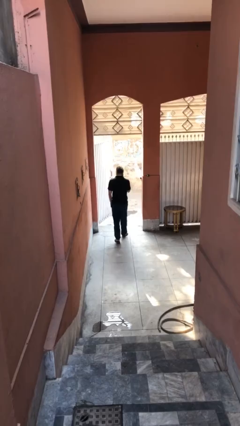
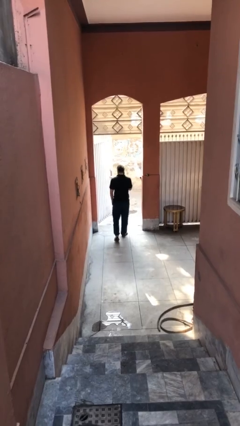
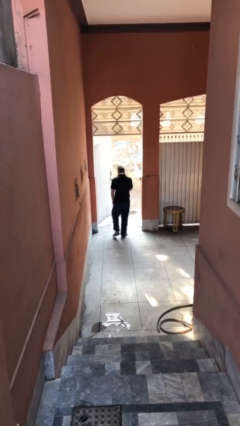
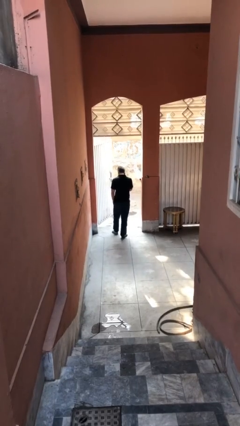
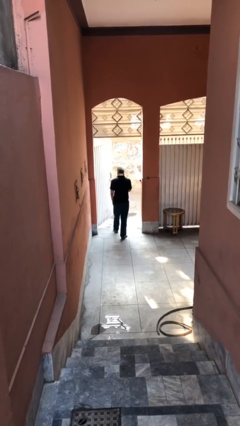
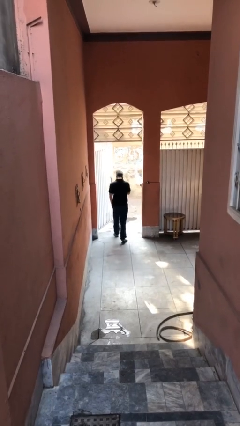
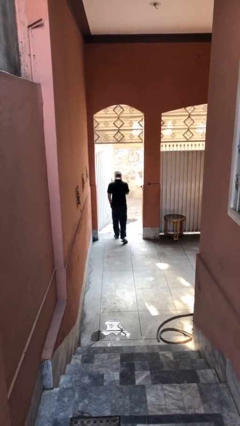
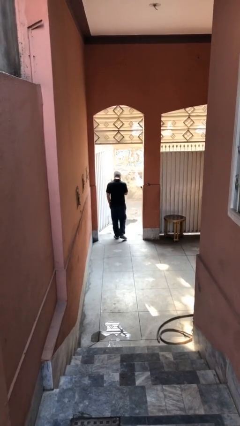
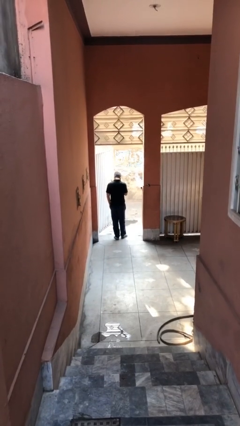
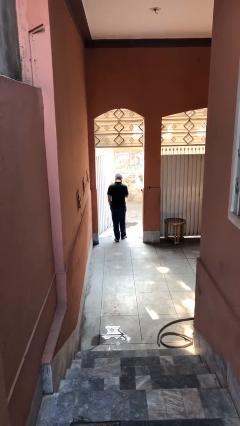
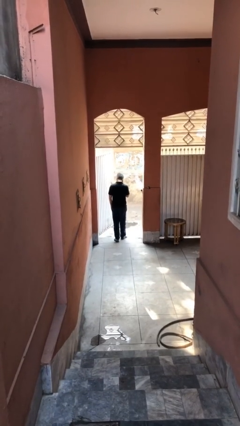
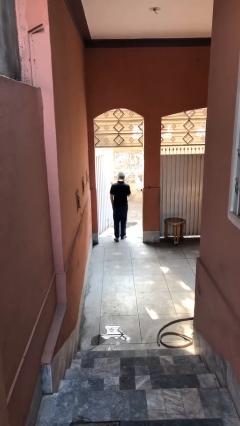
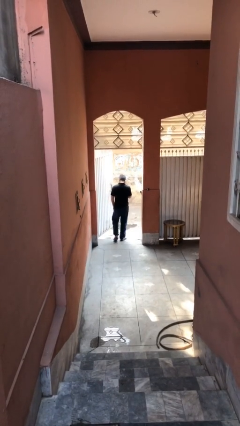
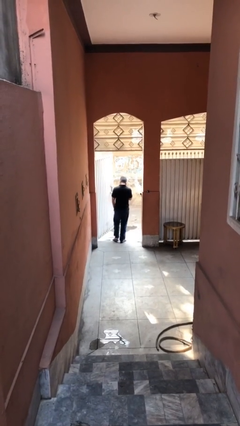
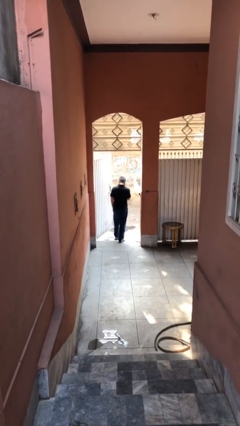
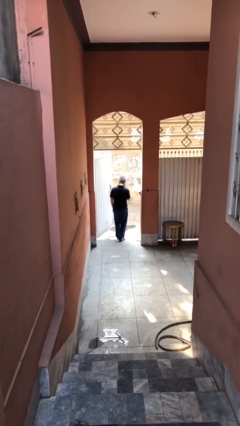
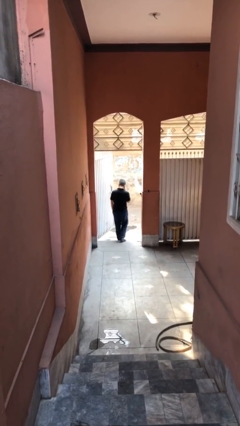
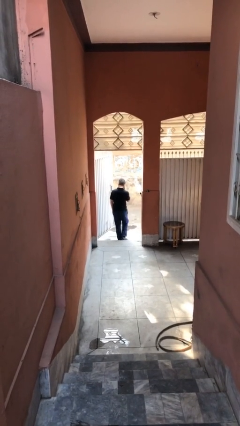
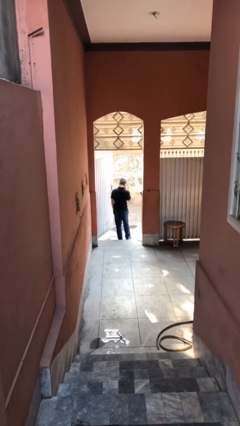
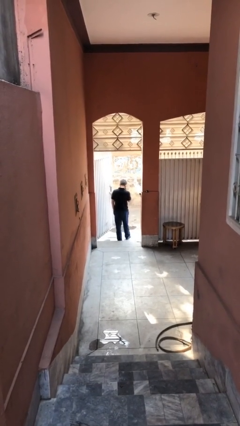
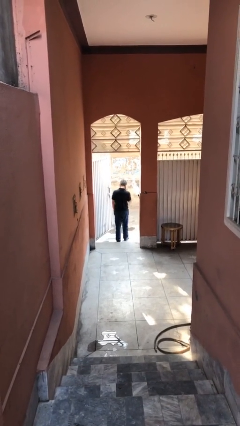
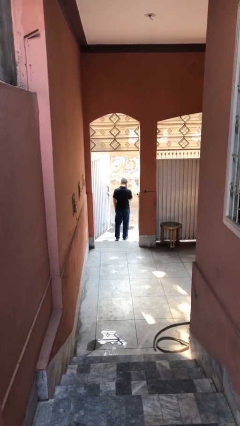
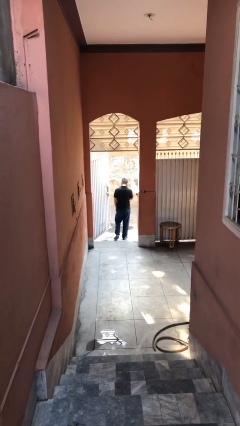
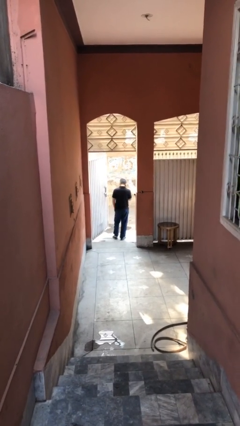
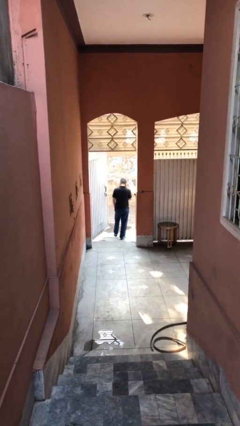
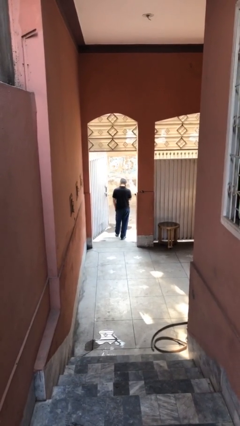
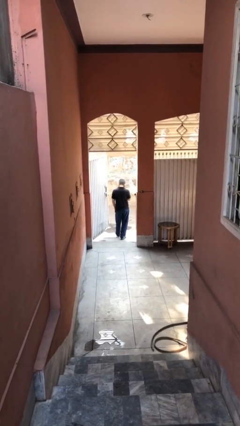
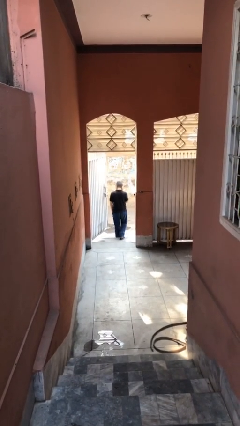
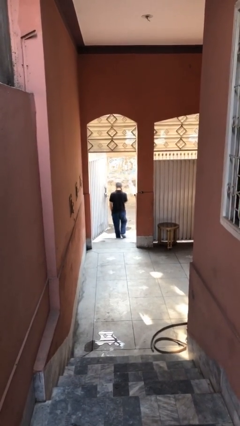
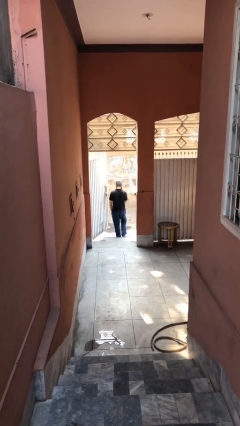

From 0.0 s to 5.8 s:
person exits scene through structure

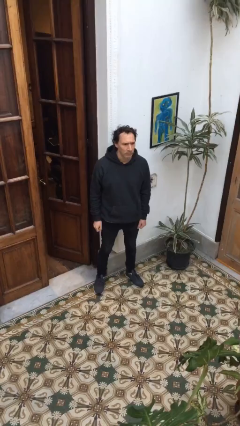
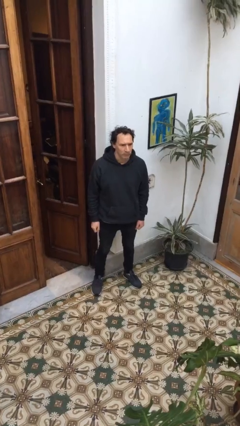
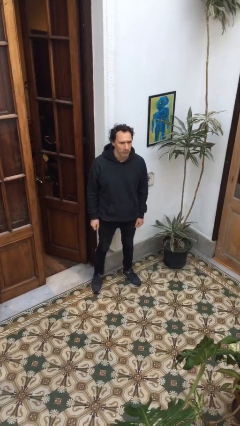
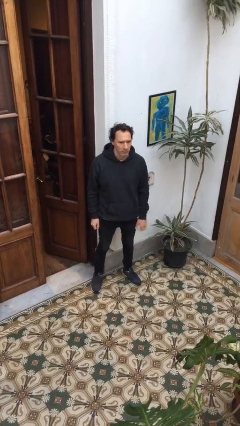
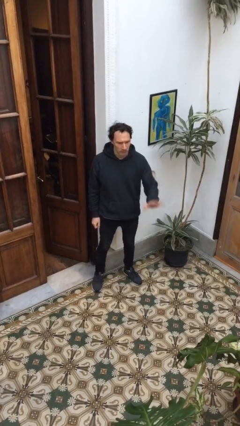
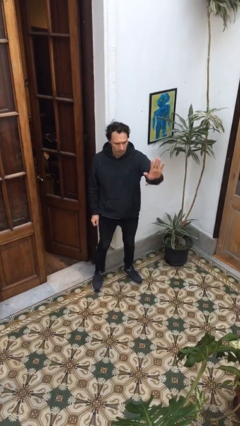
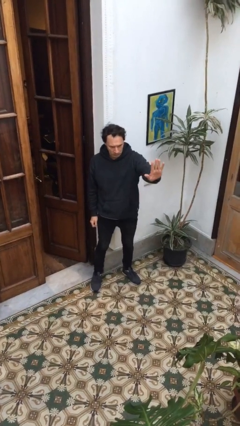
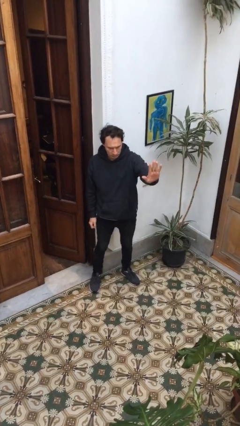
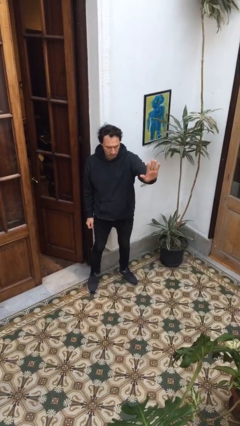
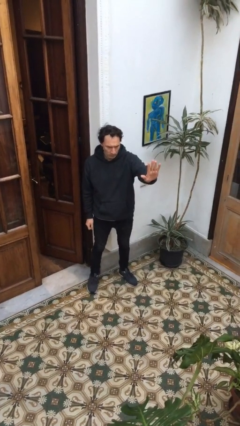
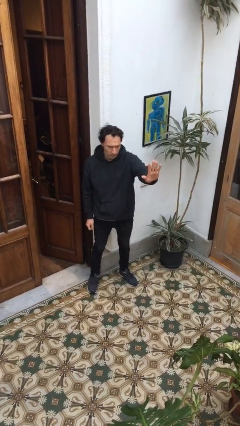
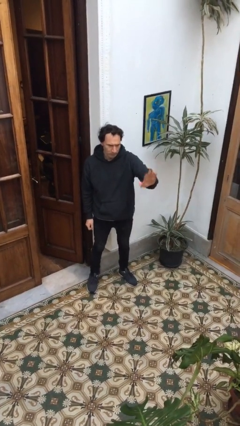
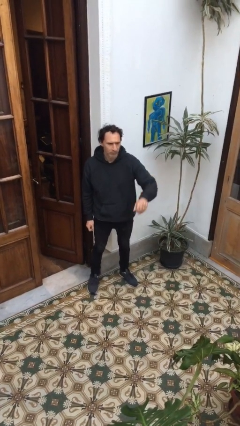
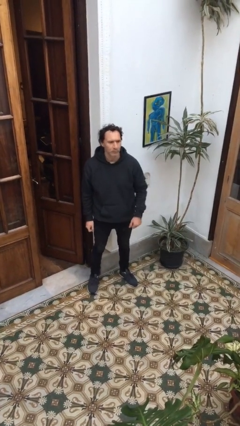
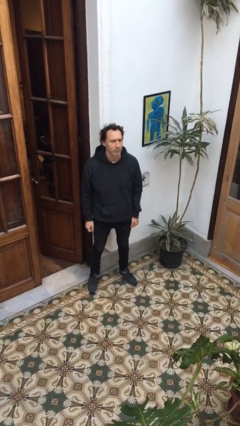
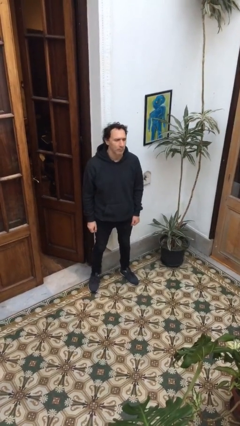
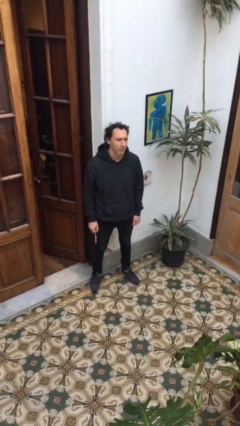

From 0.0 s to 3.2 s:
person gestures stop

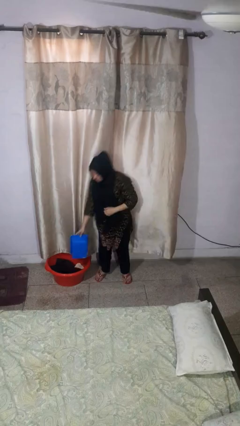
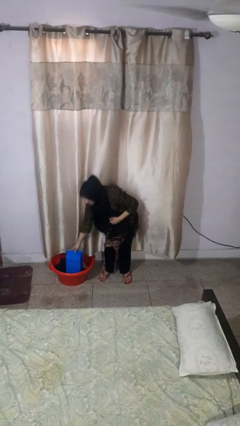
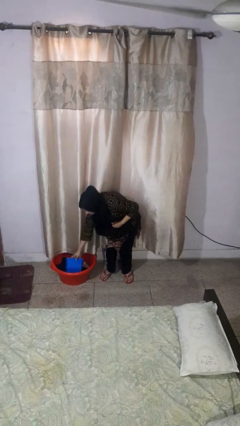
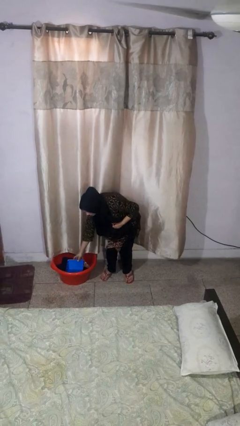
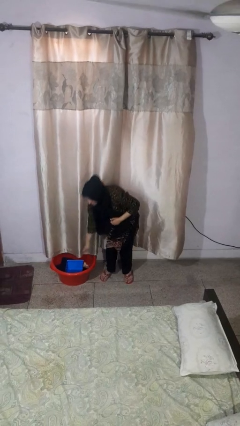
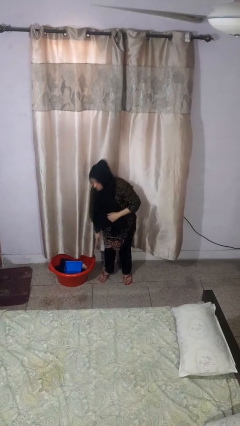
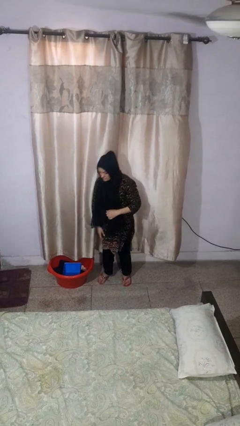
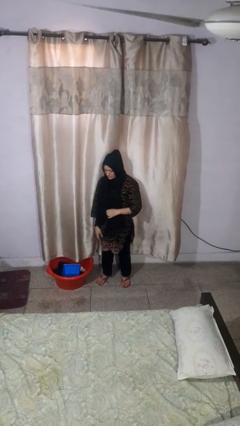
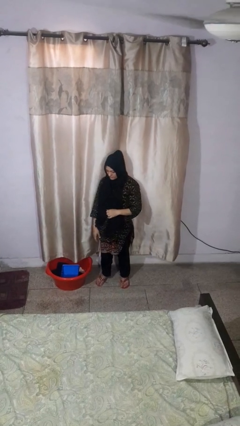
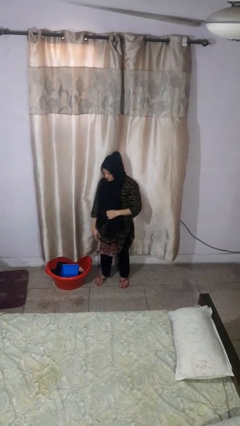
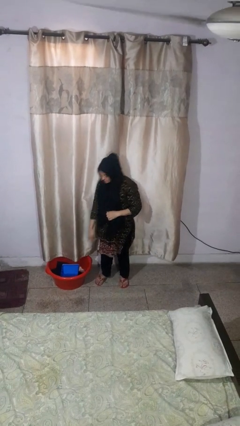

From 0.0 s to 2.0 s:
person puts object into basket

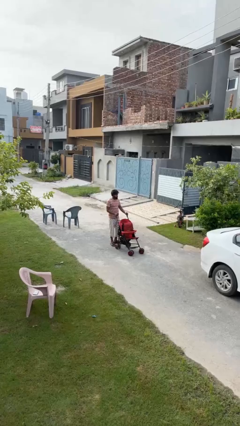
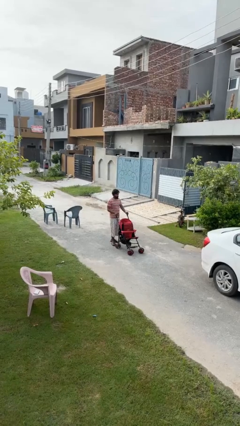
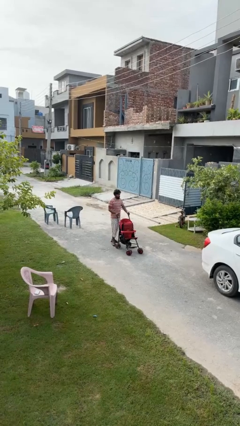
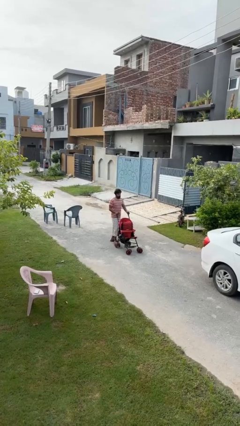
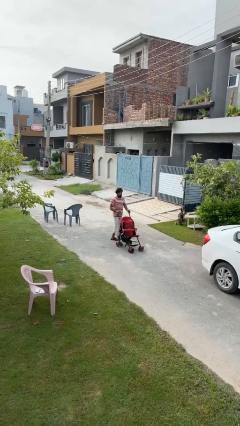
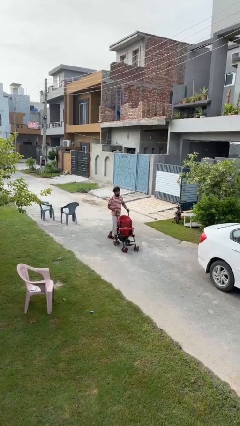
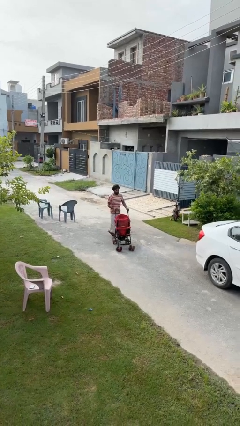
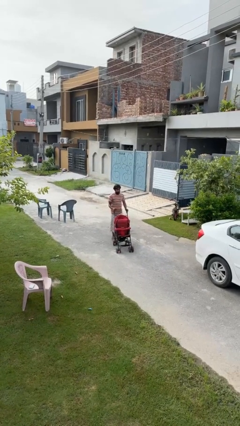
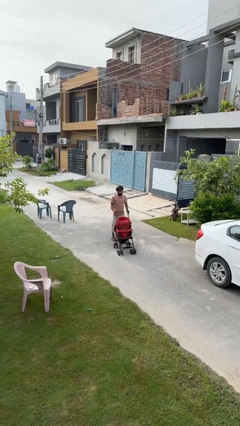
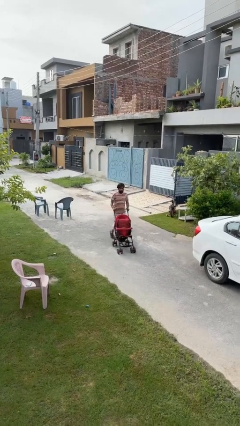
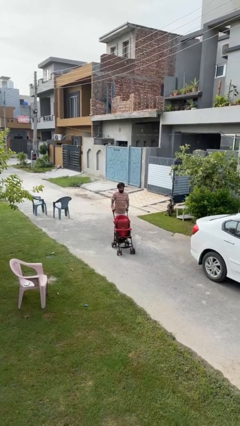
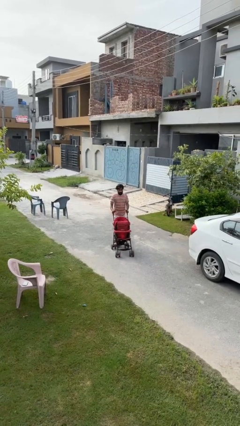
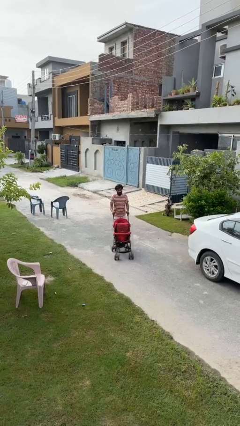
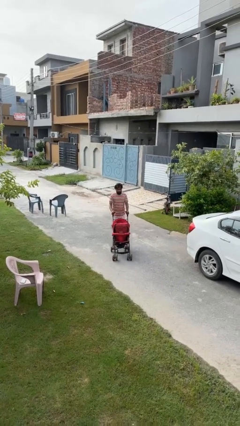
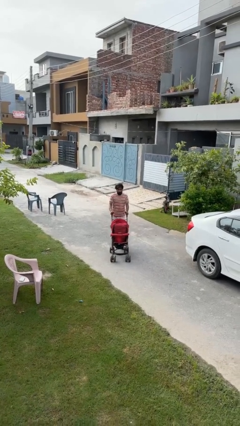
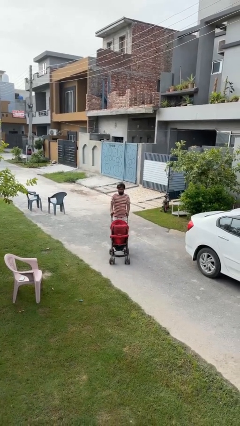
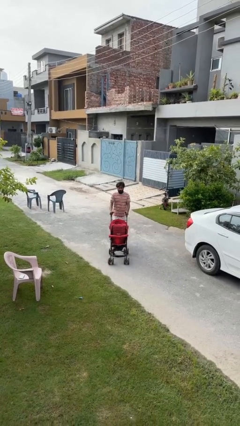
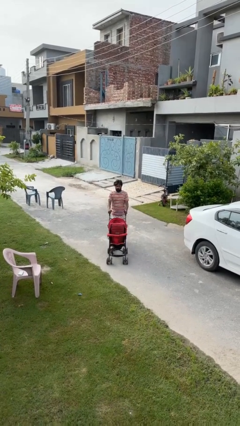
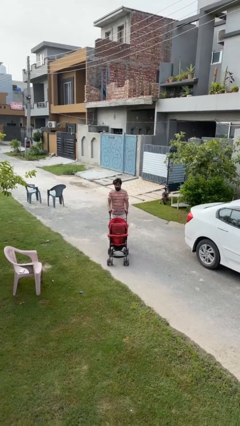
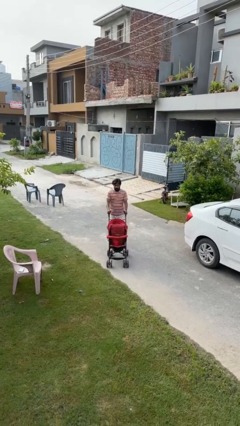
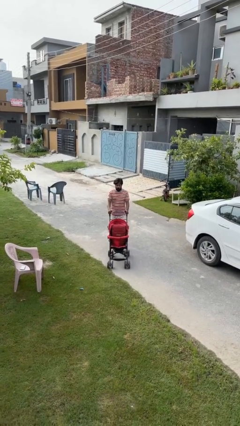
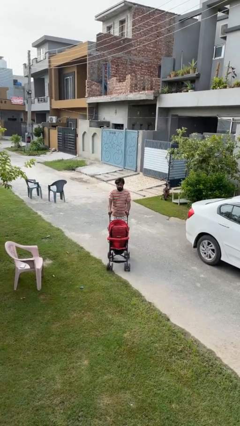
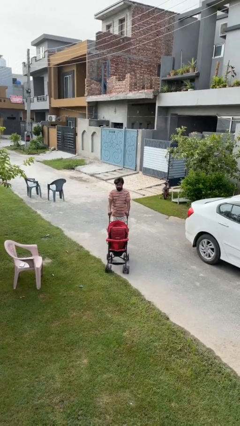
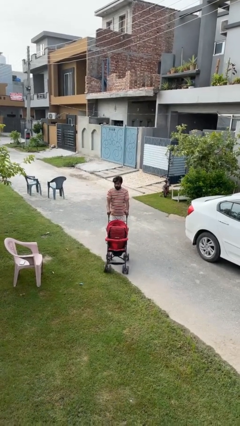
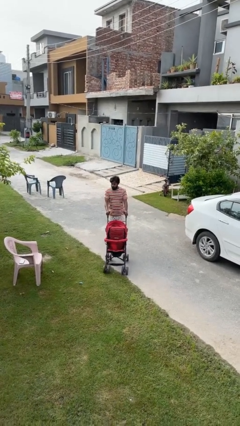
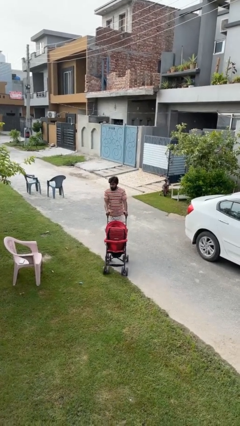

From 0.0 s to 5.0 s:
person pushes wheeled cart

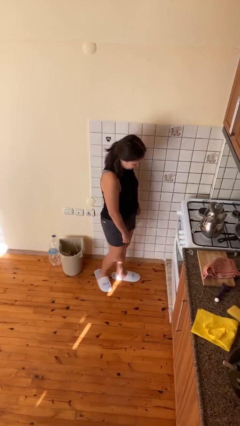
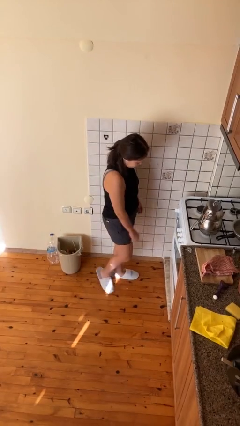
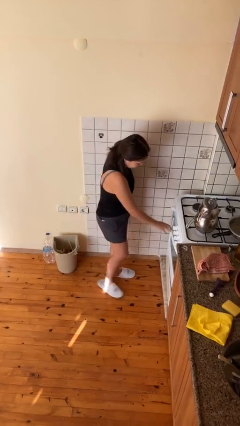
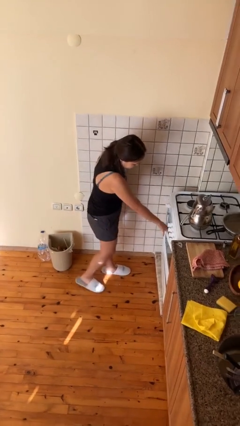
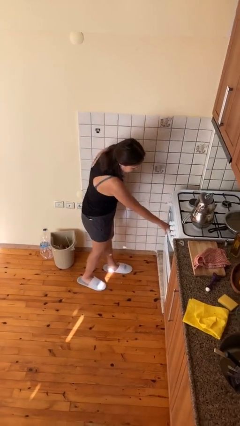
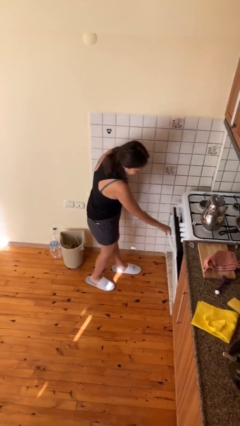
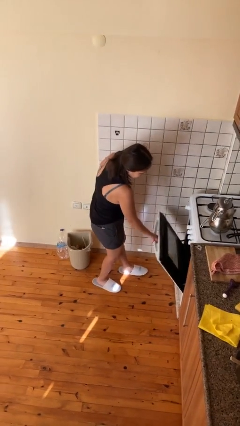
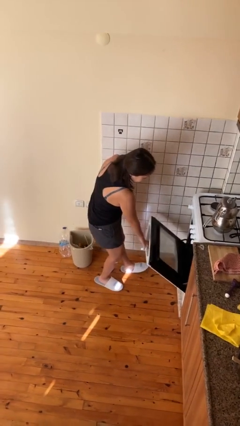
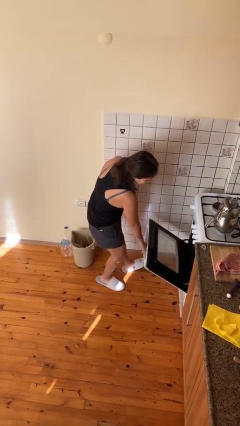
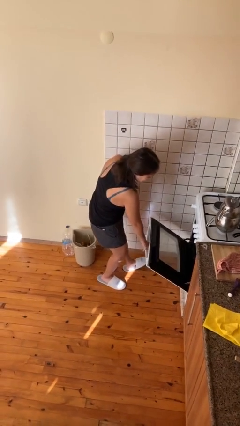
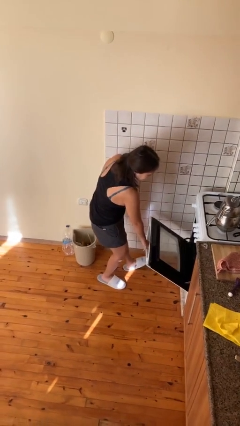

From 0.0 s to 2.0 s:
person opens oven door
